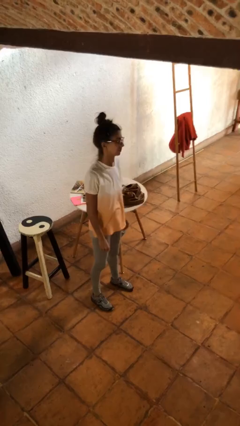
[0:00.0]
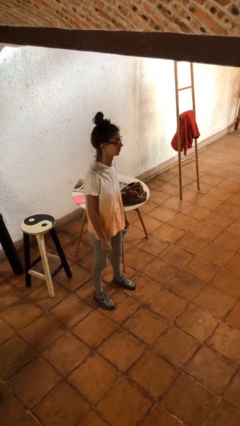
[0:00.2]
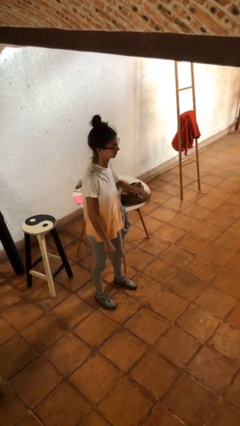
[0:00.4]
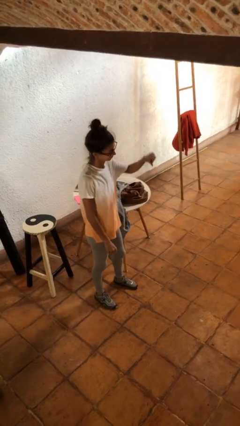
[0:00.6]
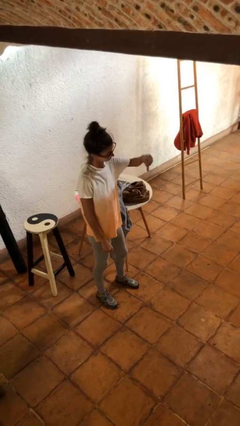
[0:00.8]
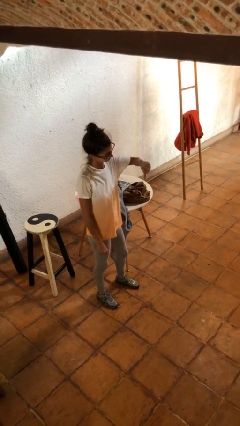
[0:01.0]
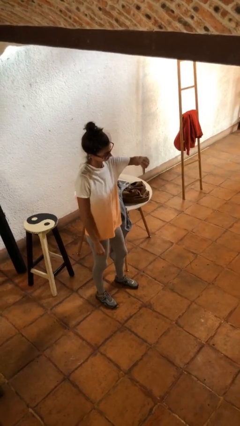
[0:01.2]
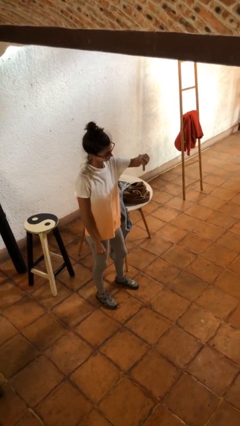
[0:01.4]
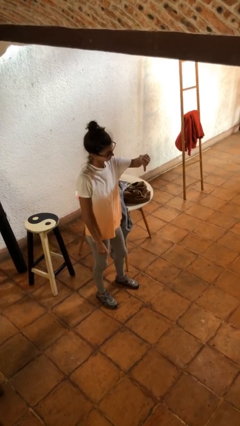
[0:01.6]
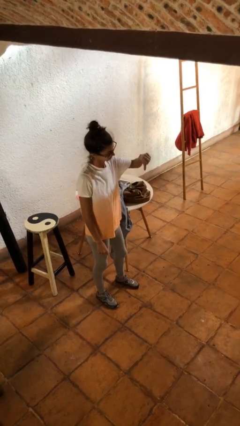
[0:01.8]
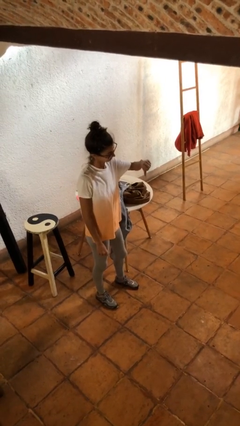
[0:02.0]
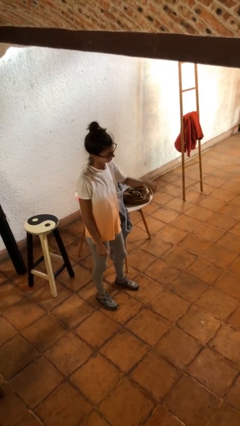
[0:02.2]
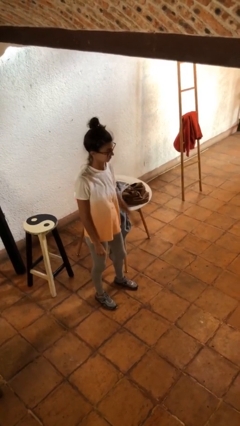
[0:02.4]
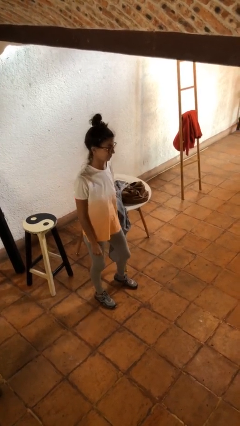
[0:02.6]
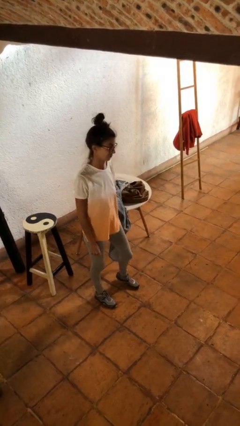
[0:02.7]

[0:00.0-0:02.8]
person gestures thumbs down

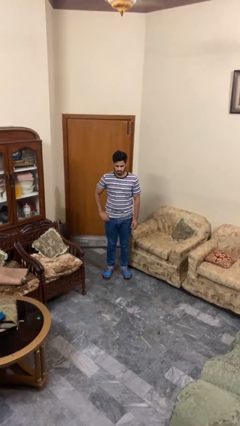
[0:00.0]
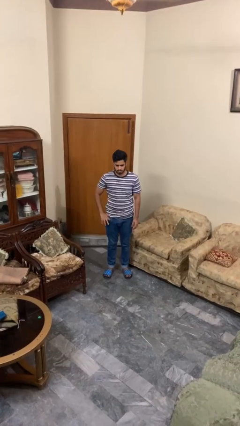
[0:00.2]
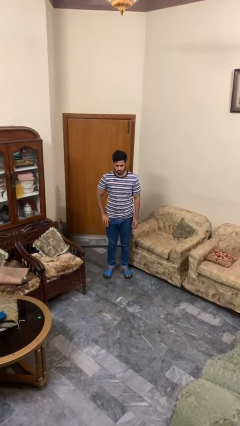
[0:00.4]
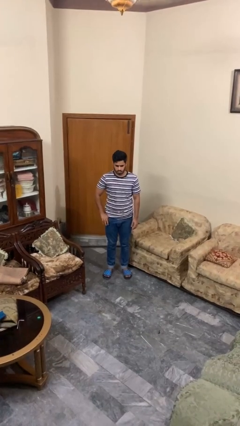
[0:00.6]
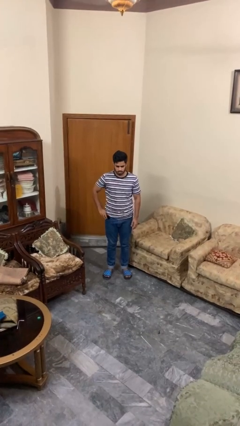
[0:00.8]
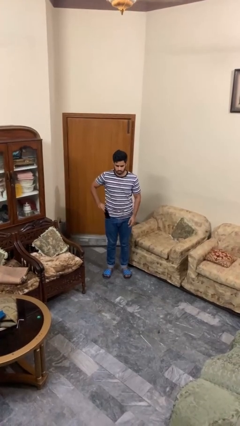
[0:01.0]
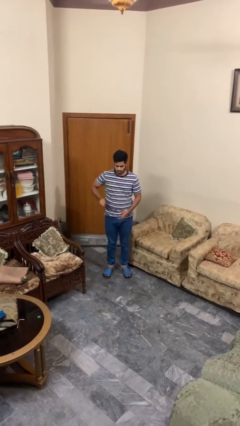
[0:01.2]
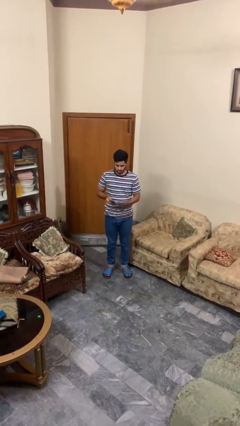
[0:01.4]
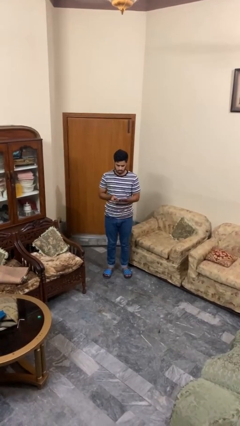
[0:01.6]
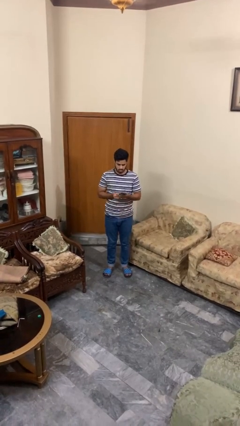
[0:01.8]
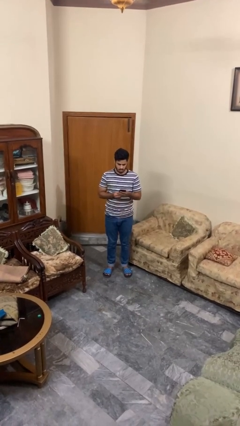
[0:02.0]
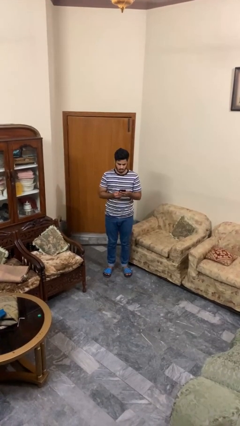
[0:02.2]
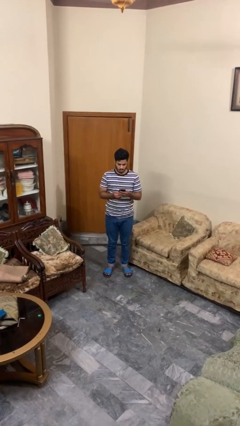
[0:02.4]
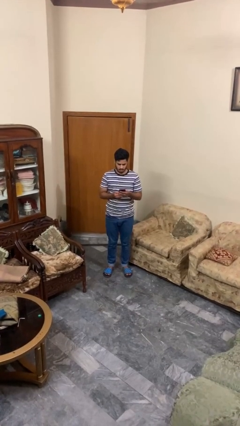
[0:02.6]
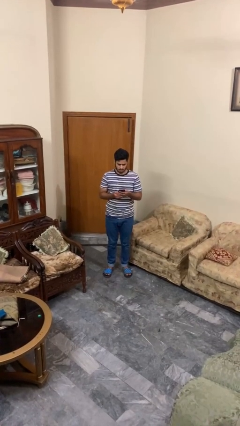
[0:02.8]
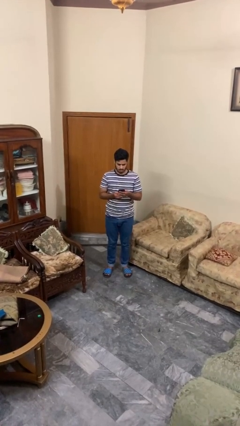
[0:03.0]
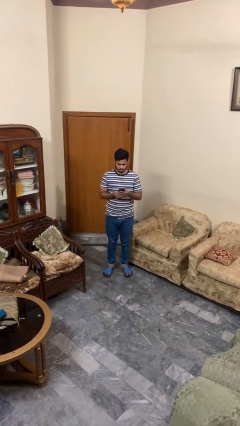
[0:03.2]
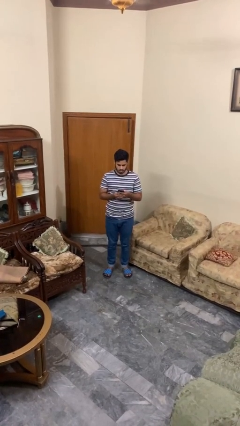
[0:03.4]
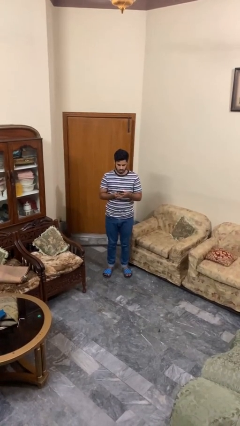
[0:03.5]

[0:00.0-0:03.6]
person takes phone from pocket

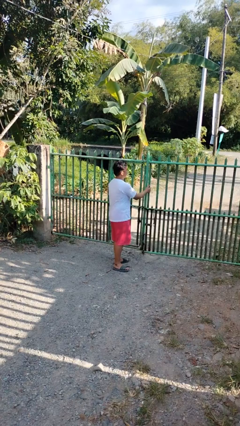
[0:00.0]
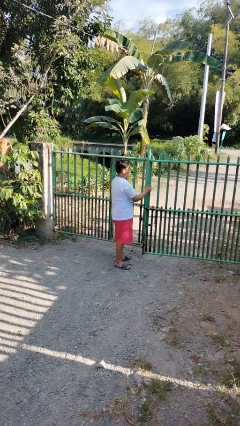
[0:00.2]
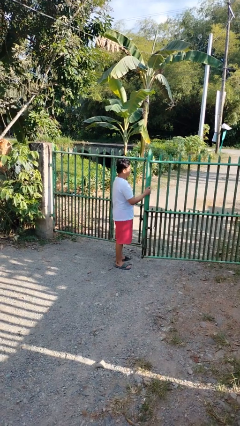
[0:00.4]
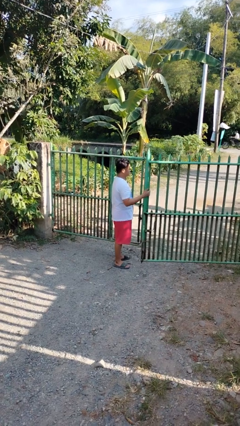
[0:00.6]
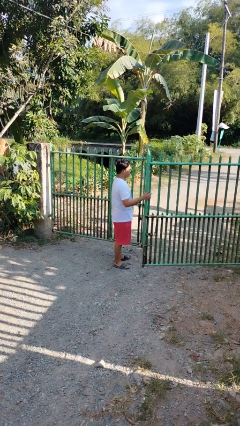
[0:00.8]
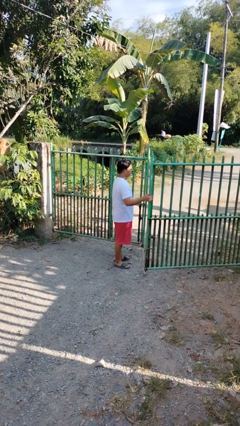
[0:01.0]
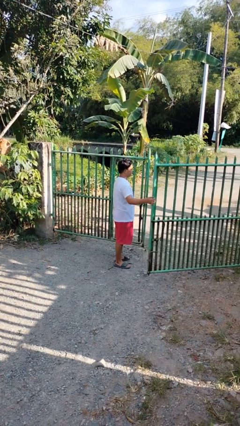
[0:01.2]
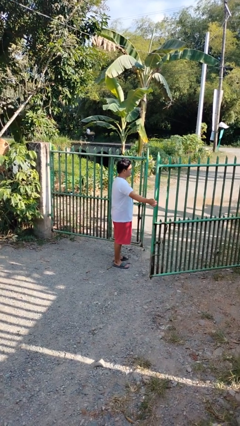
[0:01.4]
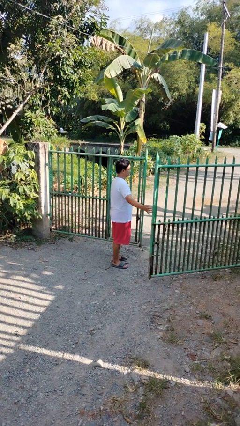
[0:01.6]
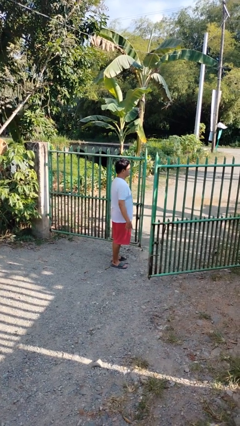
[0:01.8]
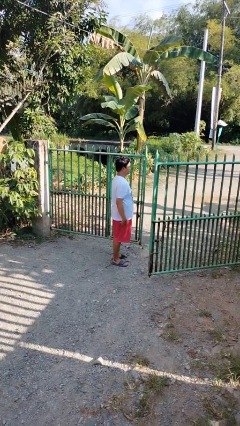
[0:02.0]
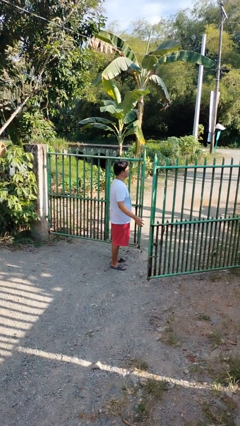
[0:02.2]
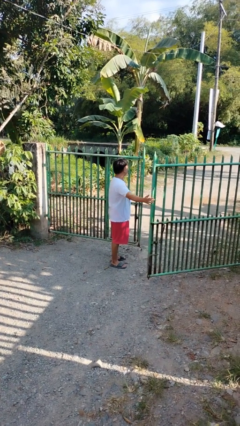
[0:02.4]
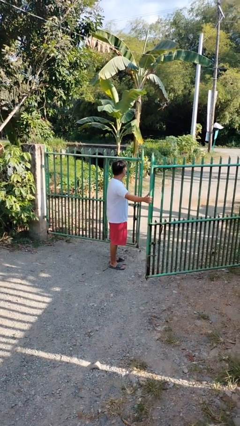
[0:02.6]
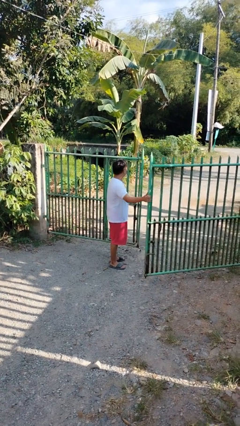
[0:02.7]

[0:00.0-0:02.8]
person opens gate

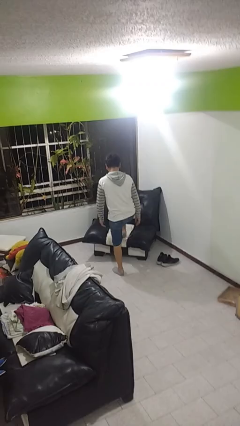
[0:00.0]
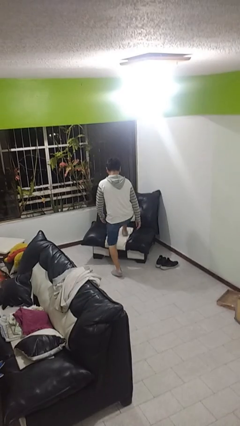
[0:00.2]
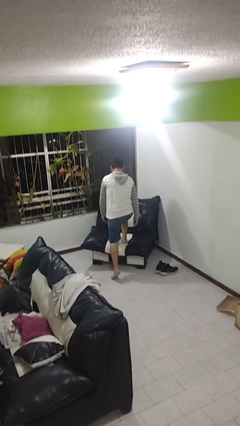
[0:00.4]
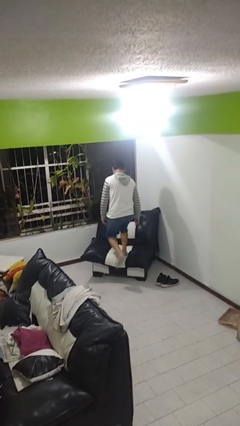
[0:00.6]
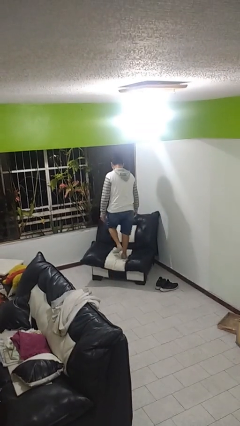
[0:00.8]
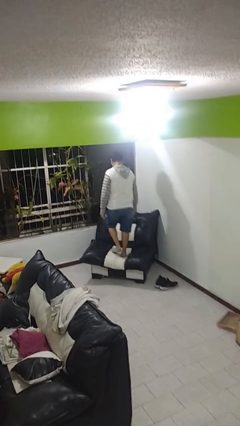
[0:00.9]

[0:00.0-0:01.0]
person climbs on couch

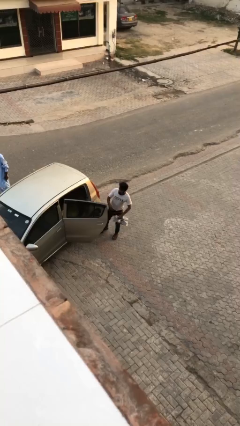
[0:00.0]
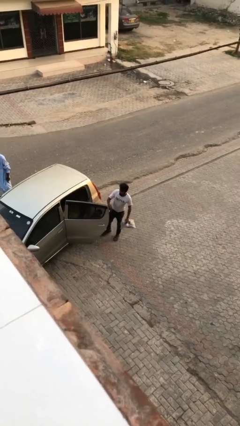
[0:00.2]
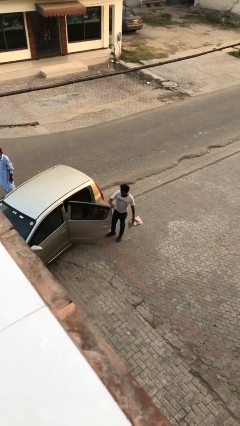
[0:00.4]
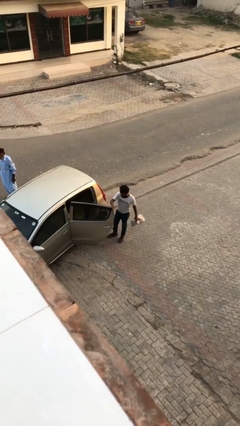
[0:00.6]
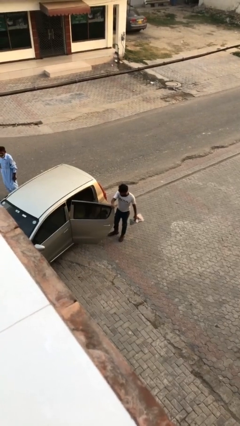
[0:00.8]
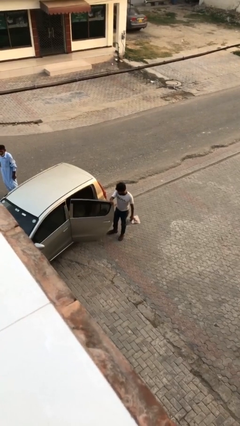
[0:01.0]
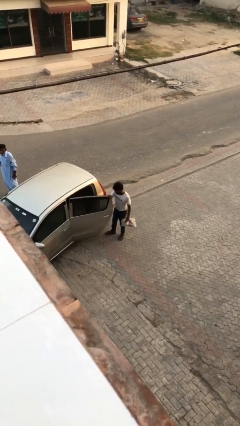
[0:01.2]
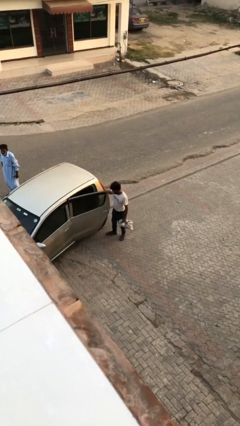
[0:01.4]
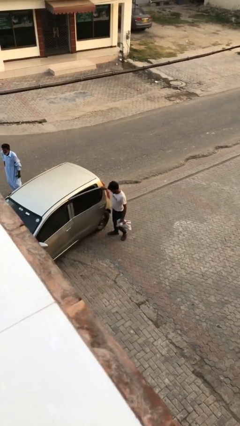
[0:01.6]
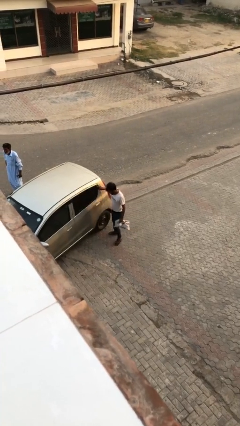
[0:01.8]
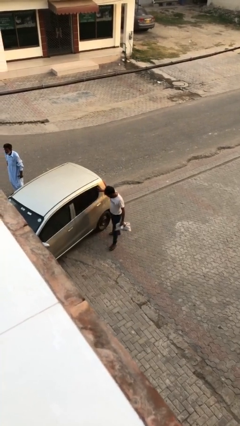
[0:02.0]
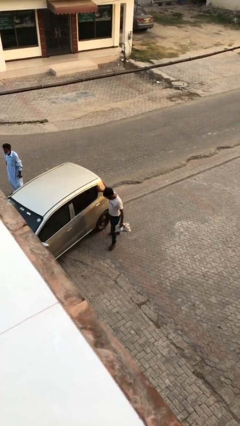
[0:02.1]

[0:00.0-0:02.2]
person closes car door

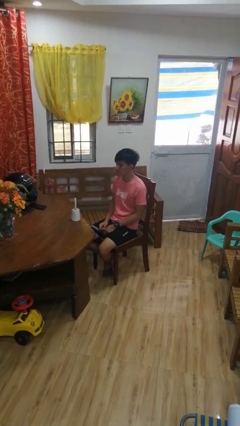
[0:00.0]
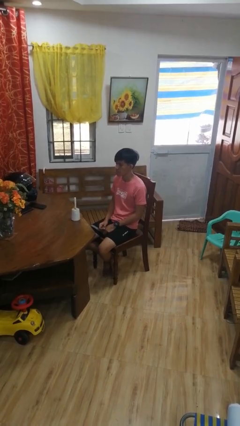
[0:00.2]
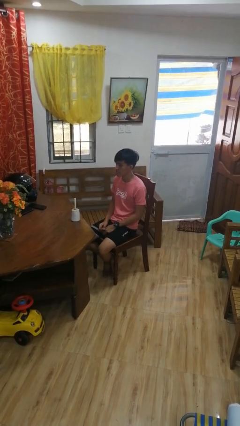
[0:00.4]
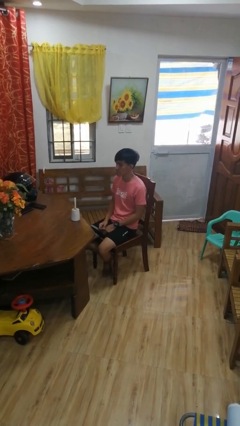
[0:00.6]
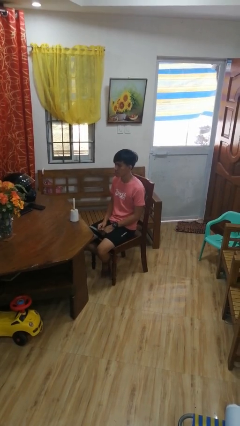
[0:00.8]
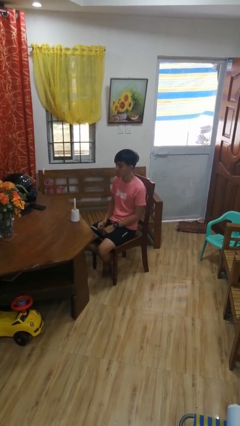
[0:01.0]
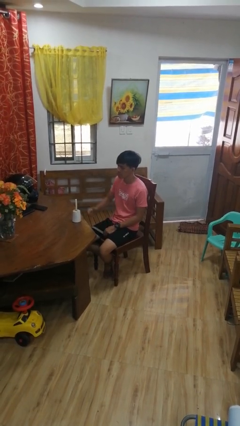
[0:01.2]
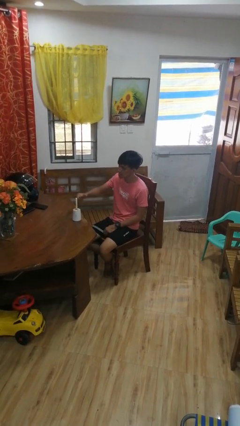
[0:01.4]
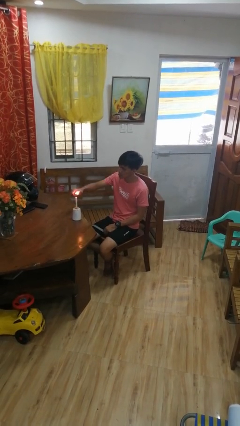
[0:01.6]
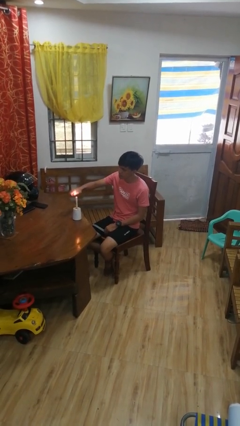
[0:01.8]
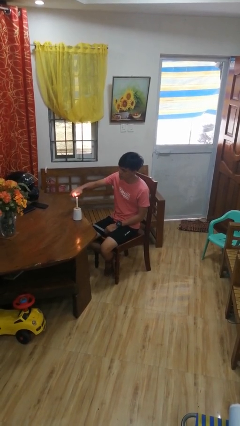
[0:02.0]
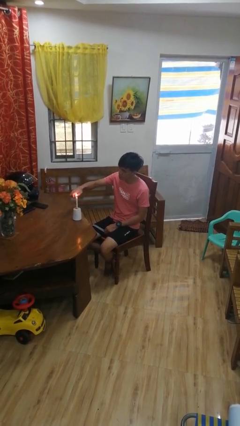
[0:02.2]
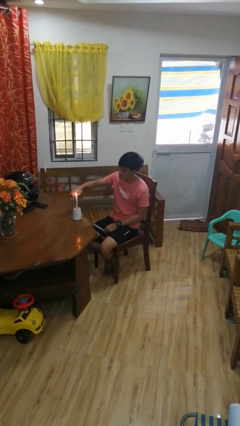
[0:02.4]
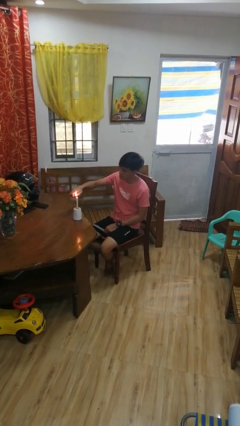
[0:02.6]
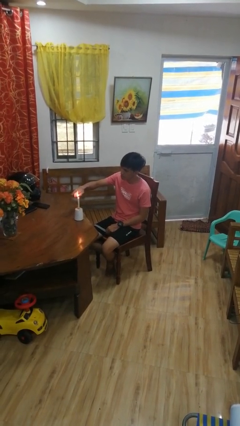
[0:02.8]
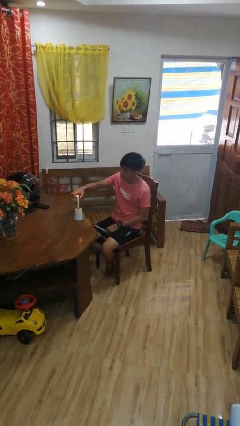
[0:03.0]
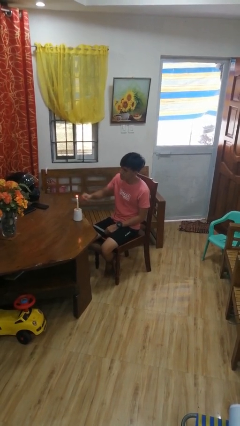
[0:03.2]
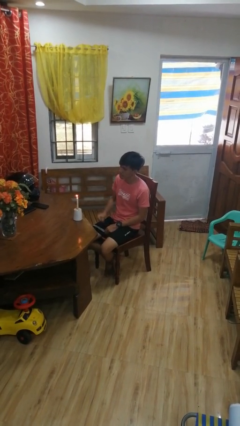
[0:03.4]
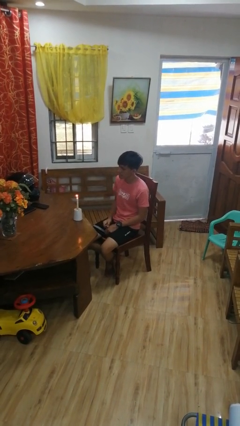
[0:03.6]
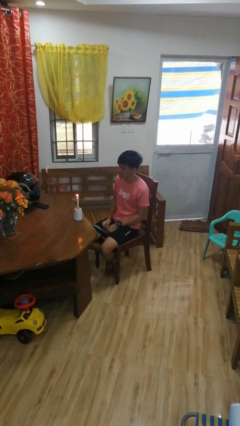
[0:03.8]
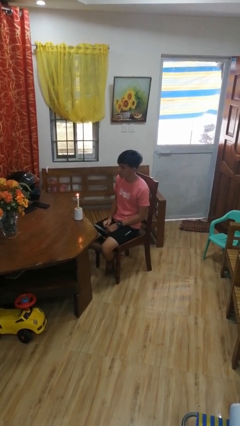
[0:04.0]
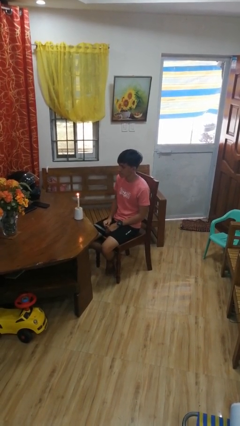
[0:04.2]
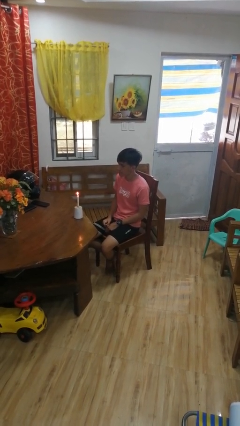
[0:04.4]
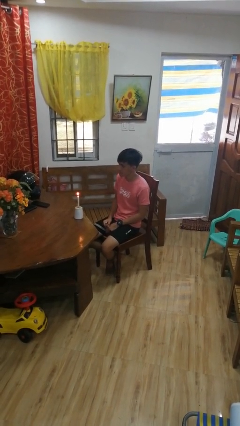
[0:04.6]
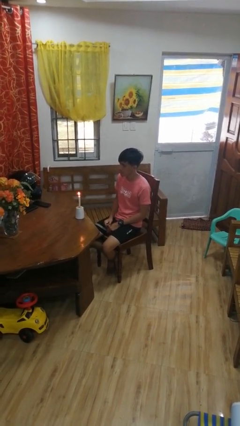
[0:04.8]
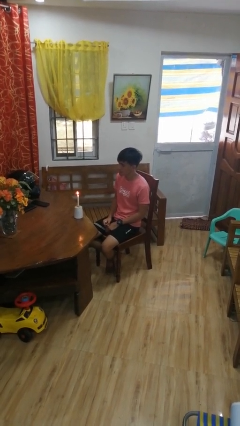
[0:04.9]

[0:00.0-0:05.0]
person lights candle
